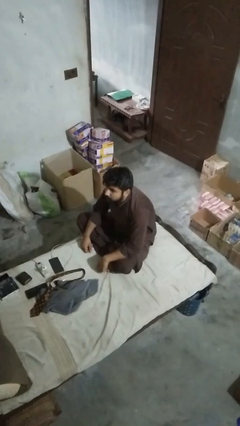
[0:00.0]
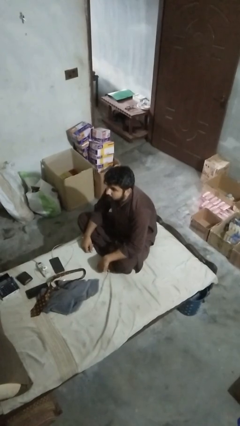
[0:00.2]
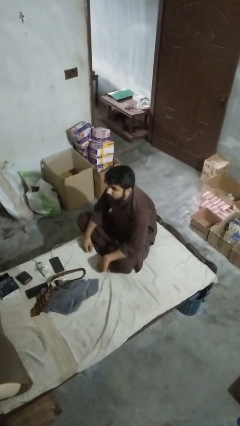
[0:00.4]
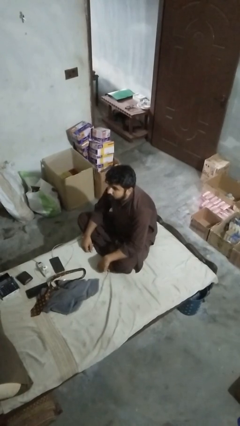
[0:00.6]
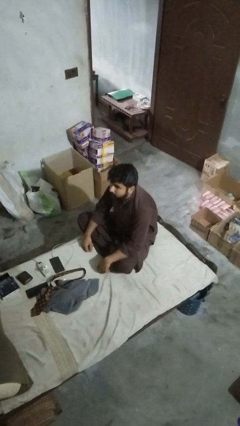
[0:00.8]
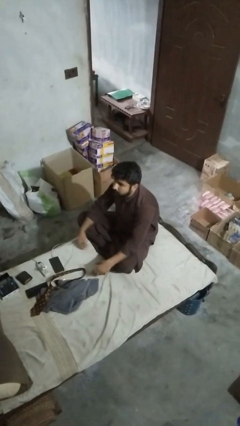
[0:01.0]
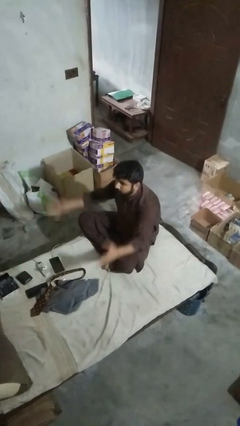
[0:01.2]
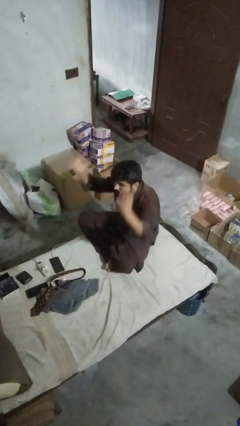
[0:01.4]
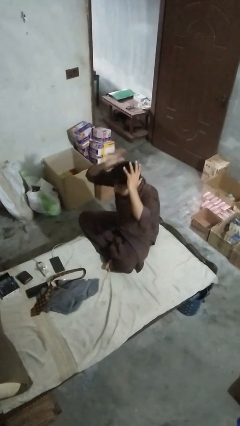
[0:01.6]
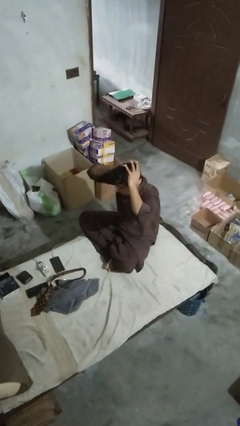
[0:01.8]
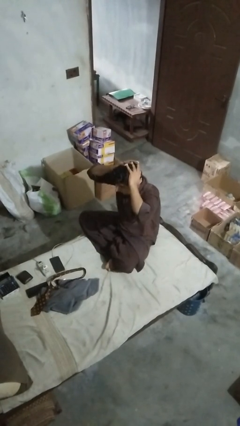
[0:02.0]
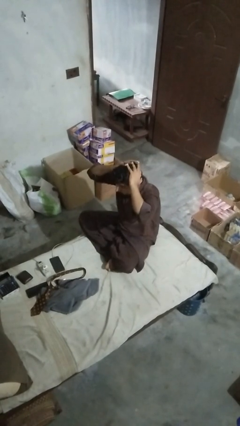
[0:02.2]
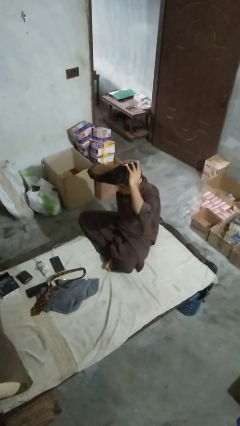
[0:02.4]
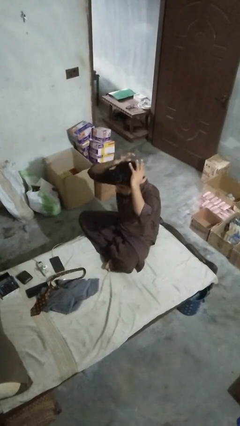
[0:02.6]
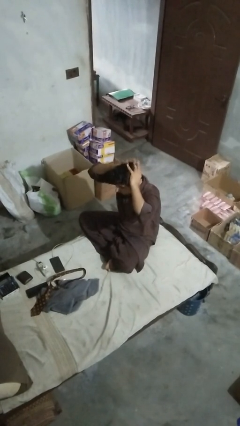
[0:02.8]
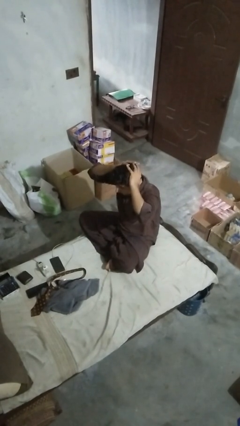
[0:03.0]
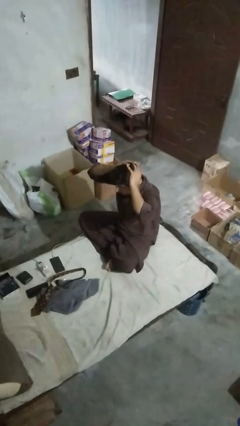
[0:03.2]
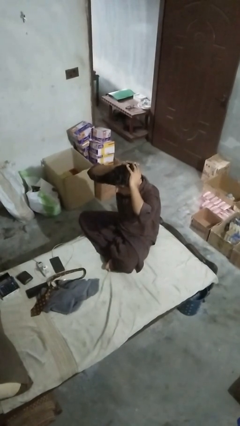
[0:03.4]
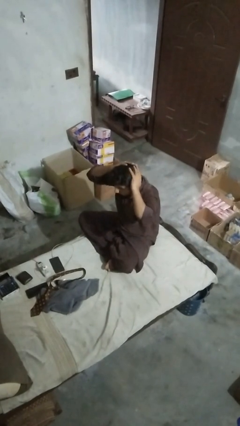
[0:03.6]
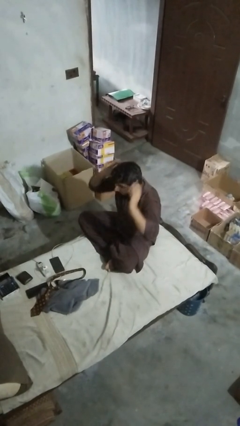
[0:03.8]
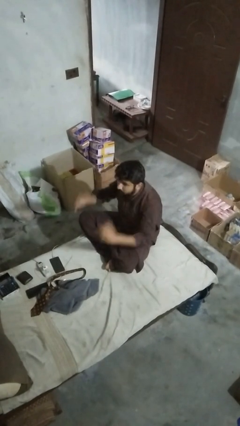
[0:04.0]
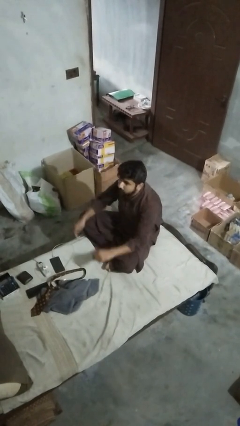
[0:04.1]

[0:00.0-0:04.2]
person pats head

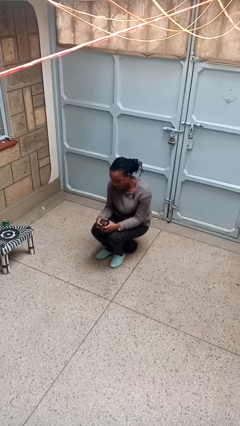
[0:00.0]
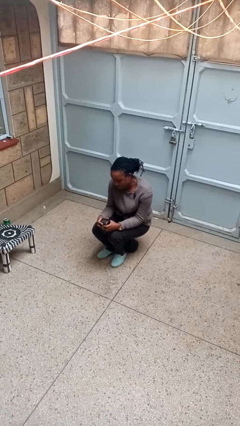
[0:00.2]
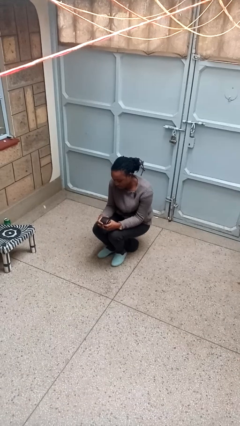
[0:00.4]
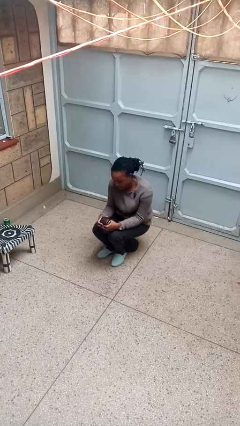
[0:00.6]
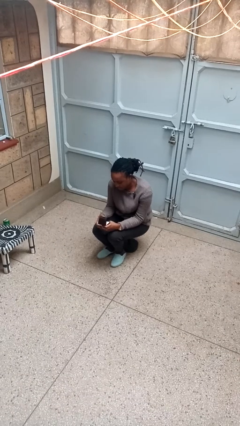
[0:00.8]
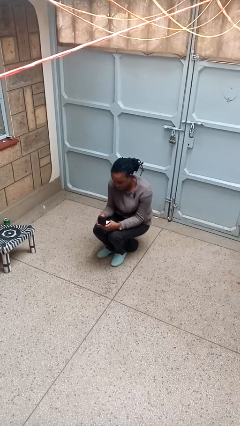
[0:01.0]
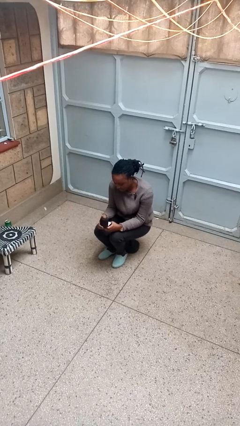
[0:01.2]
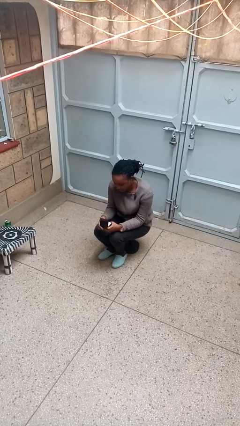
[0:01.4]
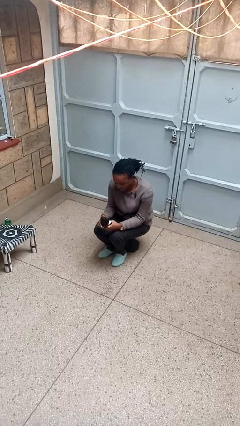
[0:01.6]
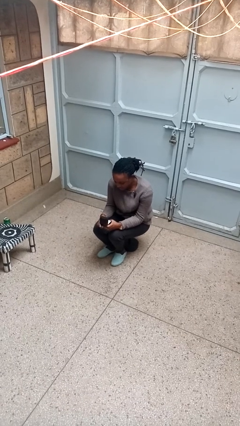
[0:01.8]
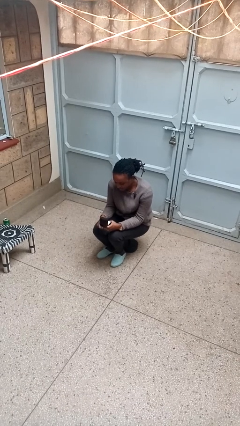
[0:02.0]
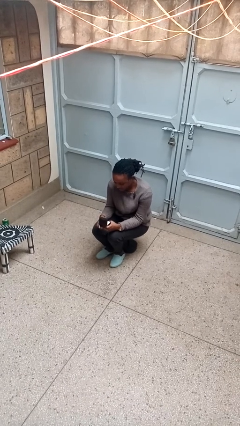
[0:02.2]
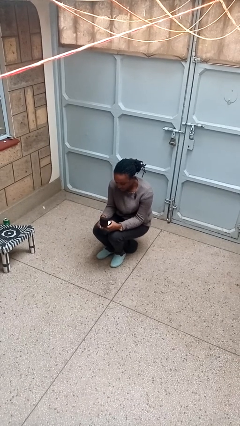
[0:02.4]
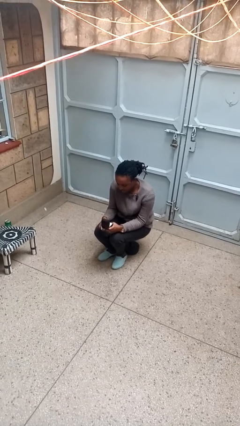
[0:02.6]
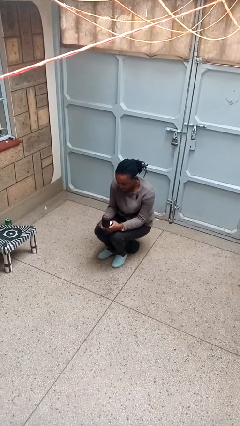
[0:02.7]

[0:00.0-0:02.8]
person opens jewelry box

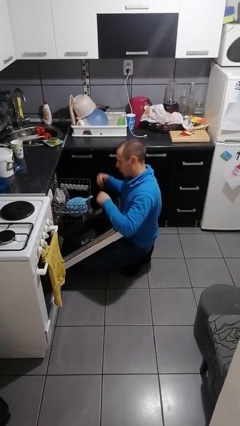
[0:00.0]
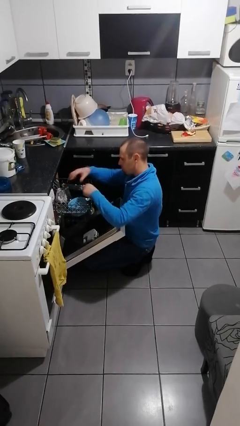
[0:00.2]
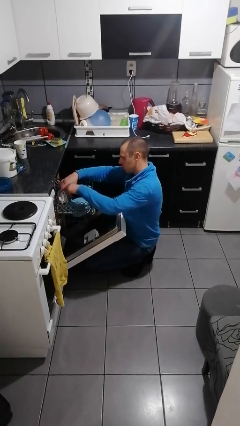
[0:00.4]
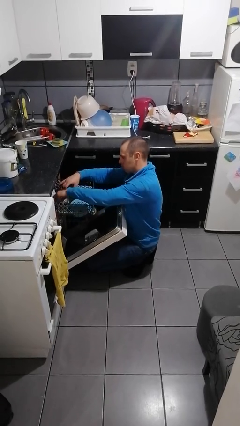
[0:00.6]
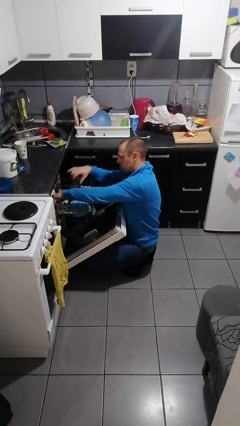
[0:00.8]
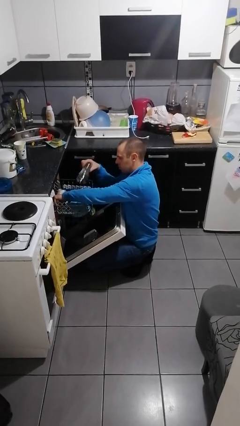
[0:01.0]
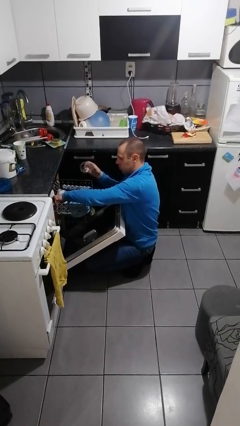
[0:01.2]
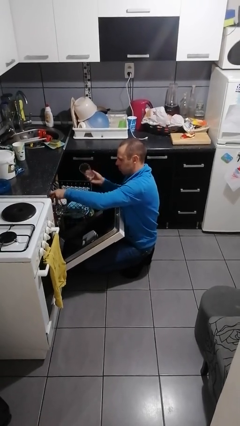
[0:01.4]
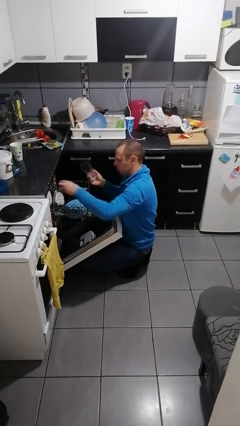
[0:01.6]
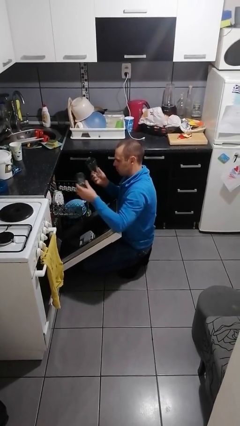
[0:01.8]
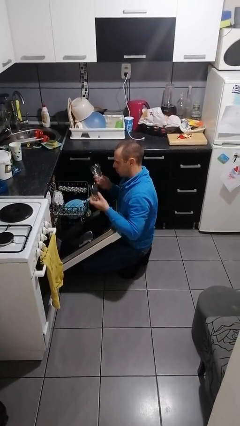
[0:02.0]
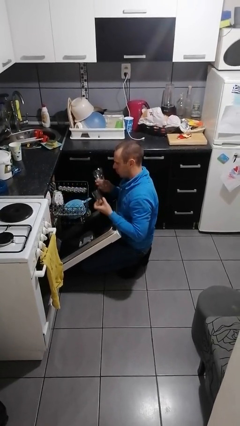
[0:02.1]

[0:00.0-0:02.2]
person unloads dishwasher

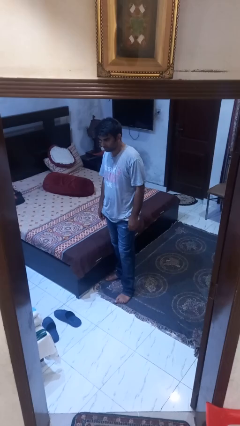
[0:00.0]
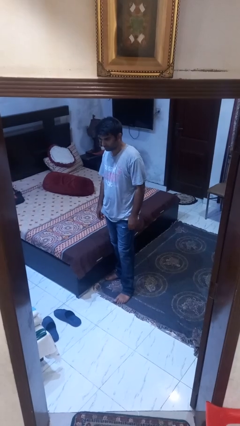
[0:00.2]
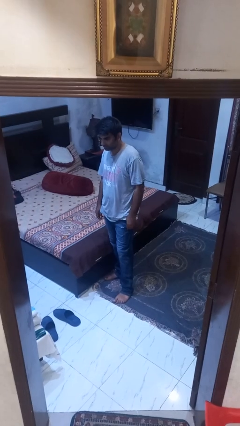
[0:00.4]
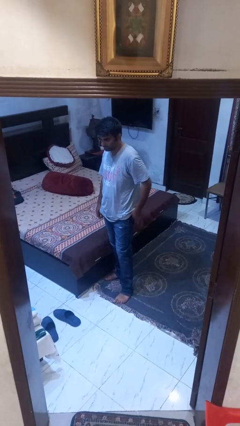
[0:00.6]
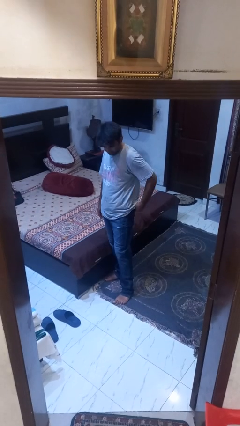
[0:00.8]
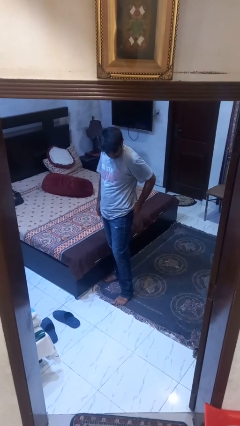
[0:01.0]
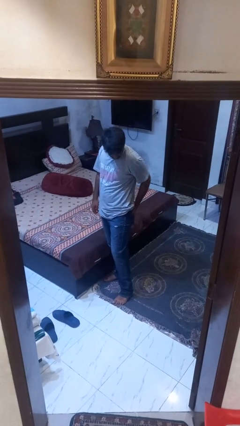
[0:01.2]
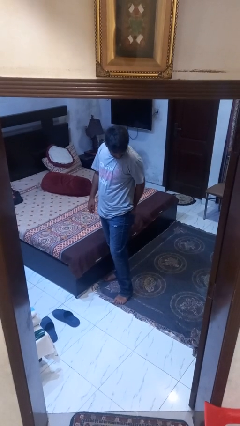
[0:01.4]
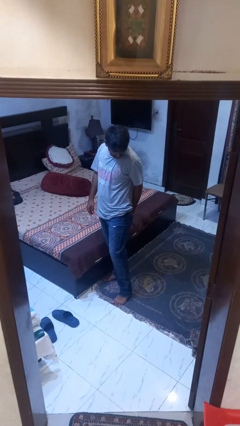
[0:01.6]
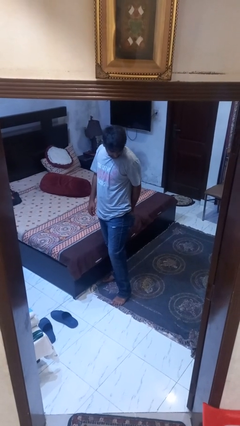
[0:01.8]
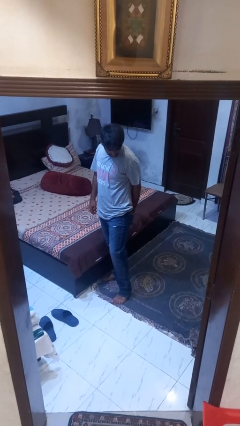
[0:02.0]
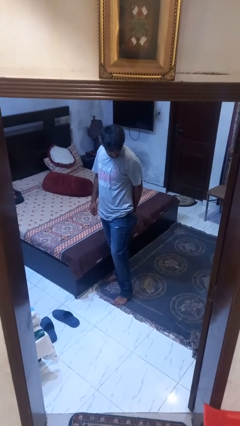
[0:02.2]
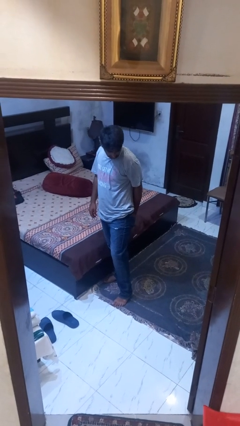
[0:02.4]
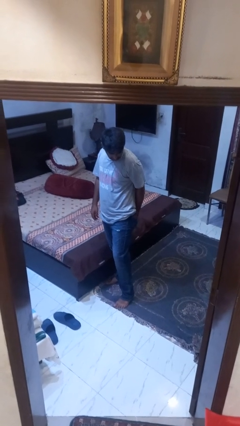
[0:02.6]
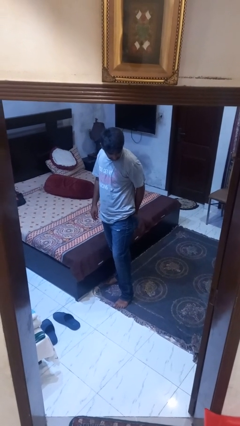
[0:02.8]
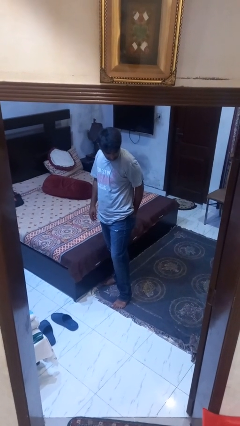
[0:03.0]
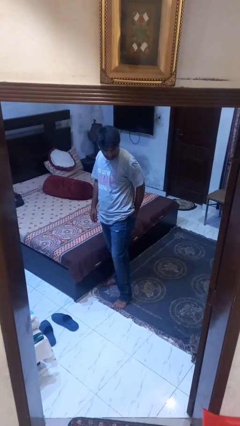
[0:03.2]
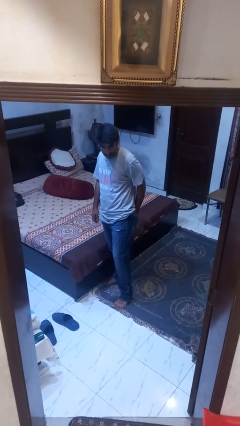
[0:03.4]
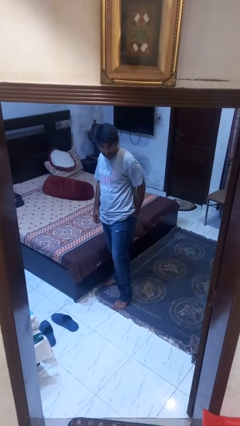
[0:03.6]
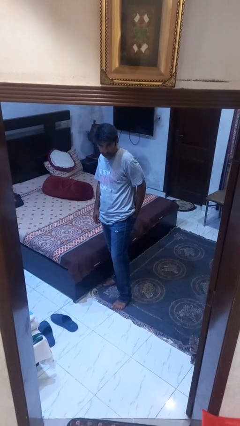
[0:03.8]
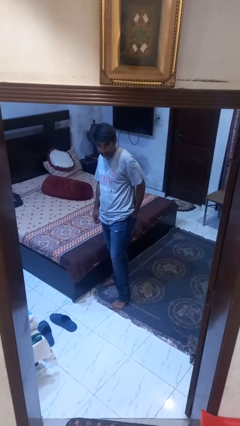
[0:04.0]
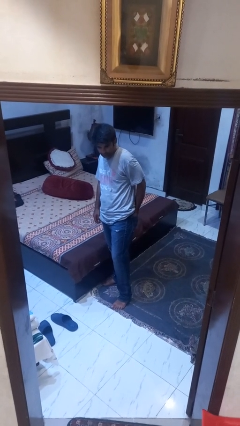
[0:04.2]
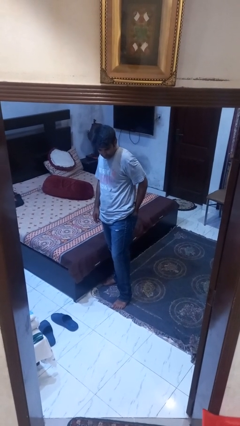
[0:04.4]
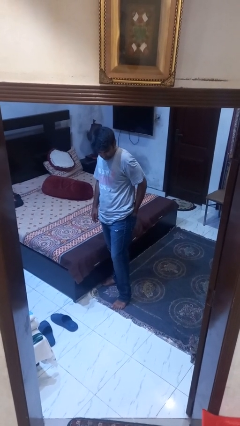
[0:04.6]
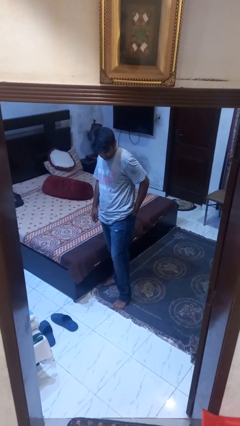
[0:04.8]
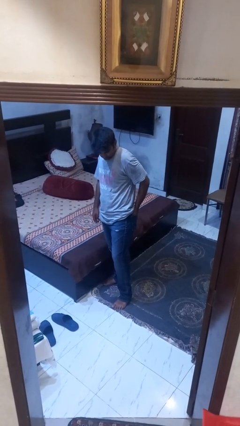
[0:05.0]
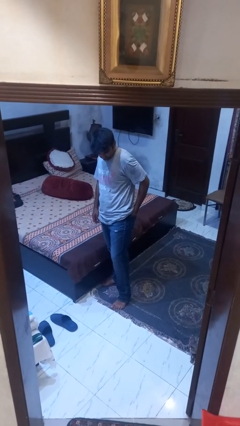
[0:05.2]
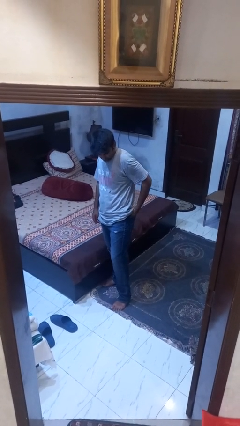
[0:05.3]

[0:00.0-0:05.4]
person puts hands in back pockets

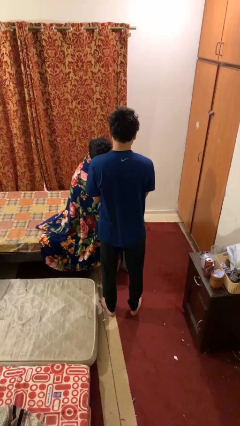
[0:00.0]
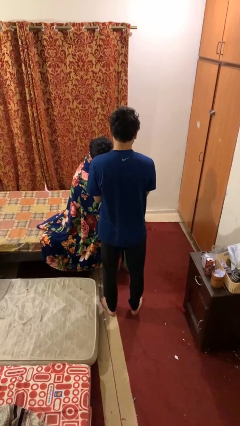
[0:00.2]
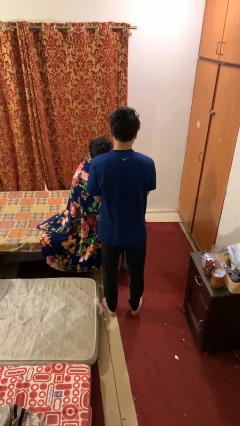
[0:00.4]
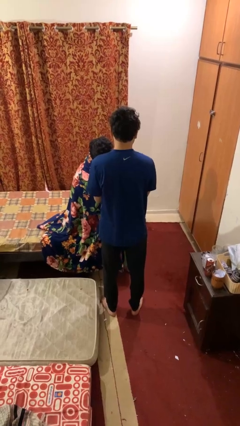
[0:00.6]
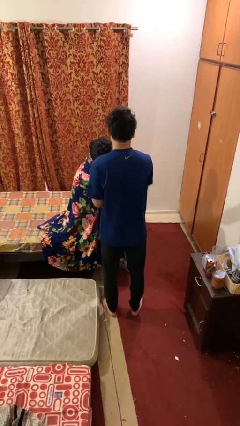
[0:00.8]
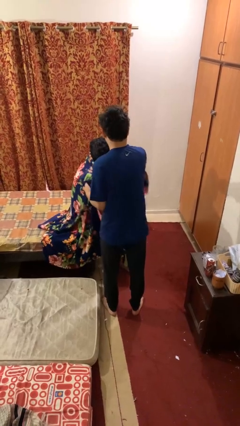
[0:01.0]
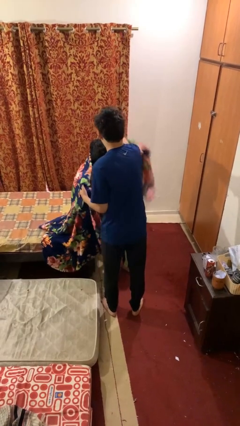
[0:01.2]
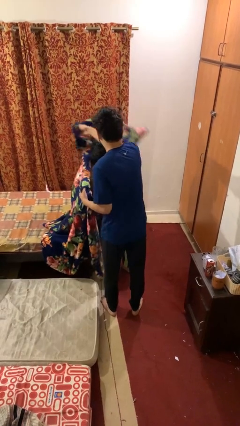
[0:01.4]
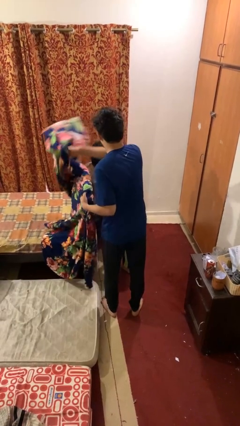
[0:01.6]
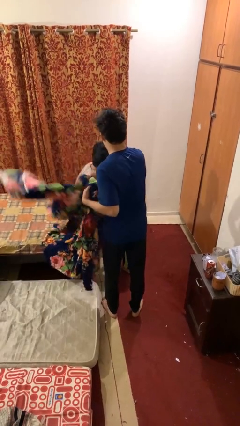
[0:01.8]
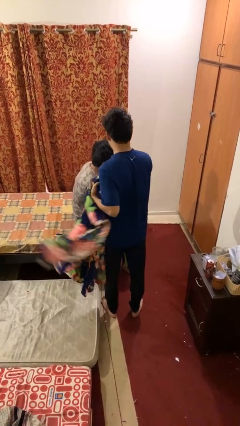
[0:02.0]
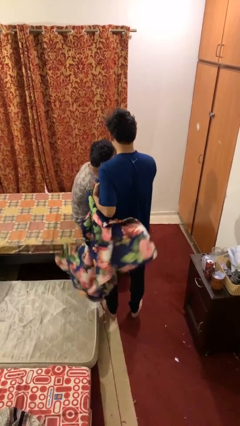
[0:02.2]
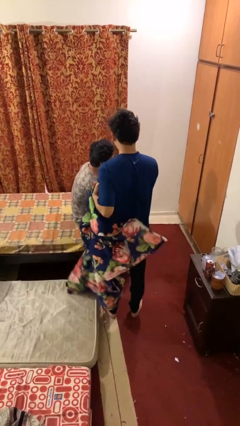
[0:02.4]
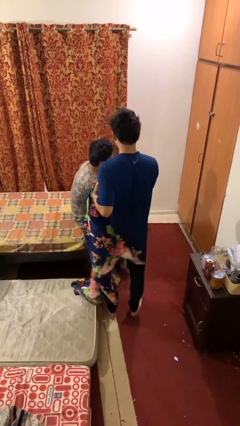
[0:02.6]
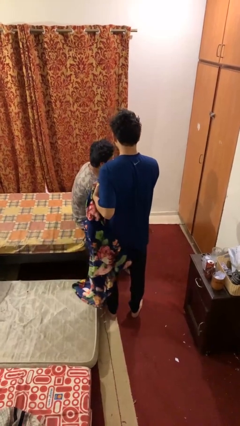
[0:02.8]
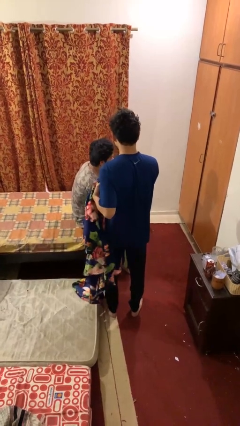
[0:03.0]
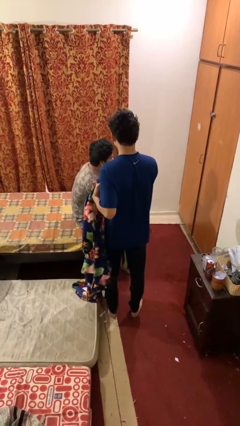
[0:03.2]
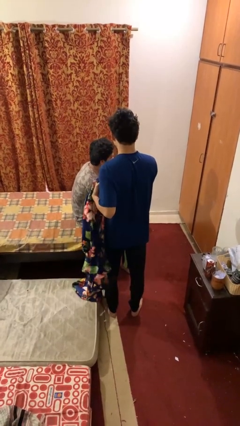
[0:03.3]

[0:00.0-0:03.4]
person uncovers friend with blanket
